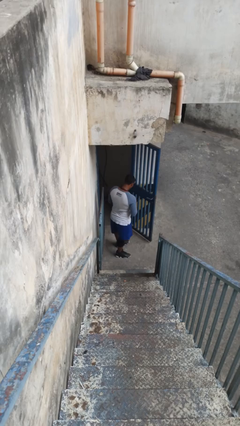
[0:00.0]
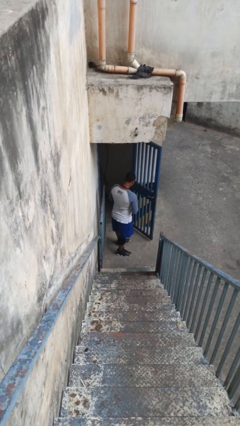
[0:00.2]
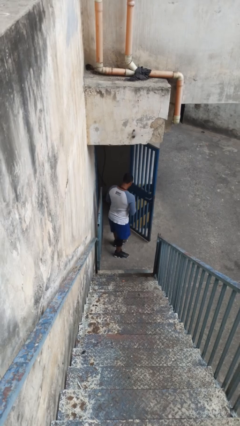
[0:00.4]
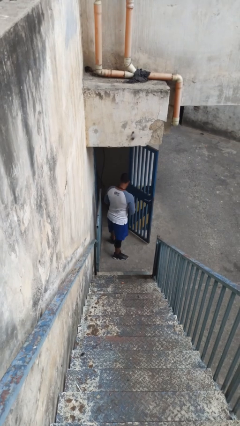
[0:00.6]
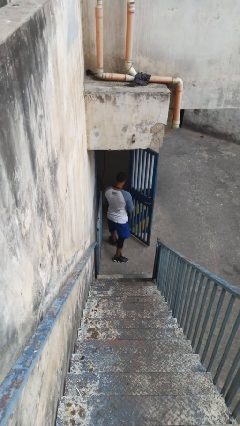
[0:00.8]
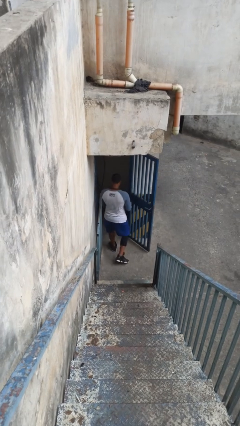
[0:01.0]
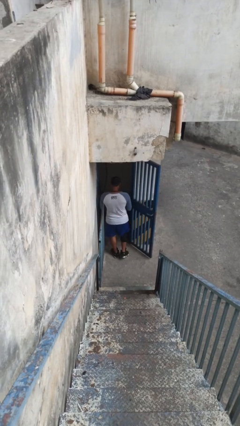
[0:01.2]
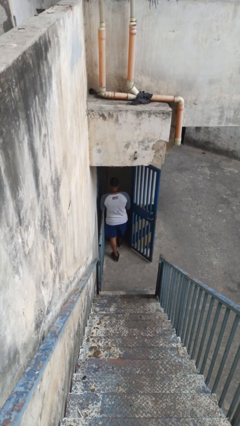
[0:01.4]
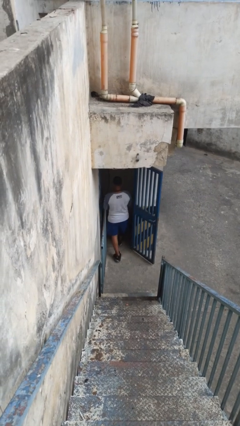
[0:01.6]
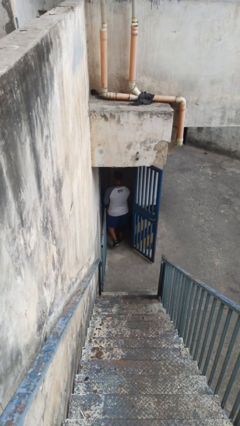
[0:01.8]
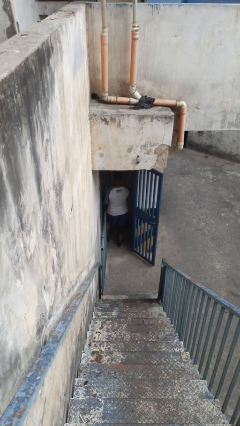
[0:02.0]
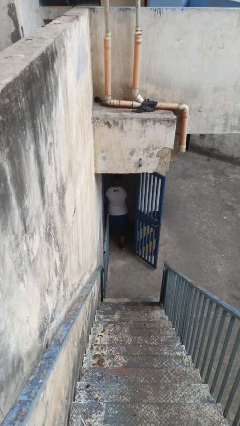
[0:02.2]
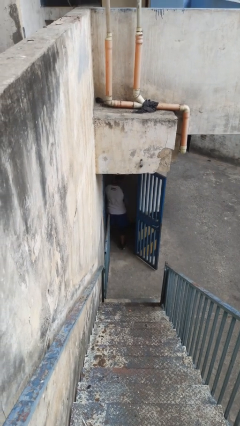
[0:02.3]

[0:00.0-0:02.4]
person exits scene through structure

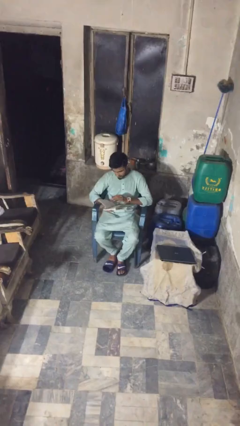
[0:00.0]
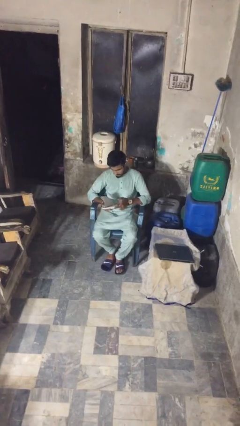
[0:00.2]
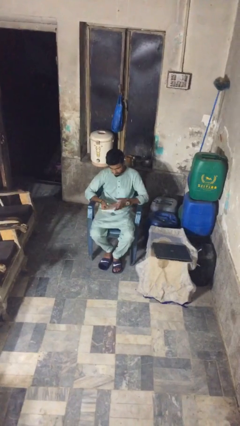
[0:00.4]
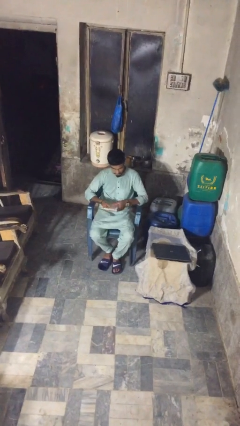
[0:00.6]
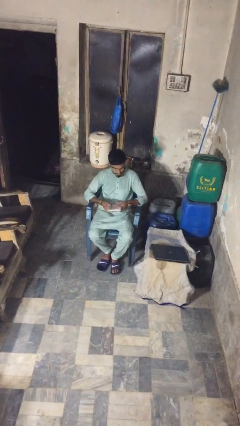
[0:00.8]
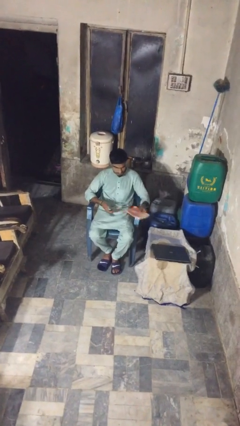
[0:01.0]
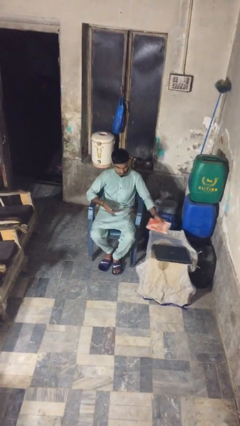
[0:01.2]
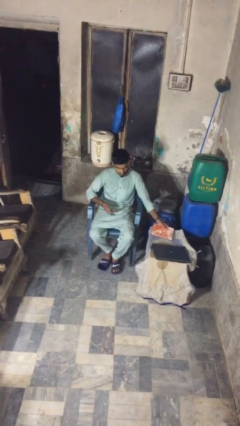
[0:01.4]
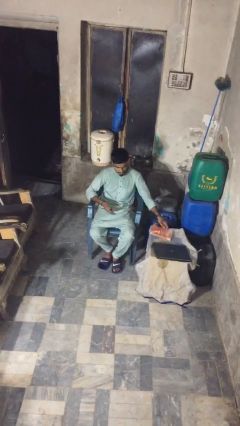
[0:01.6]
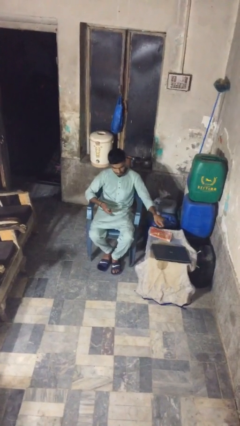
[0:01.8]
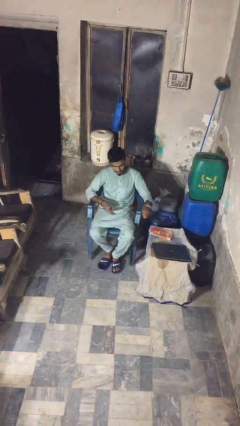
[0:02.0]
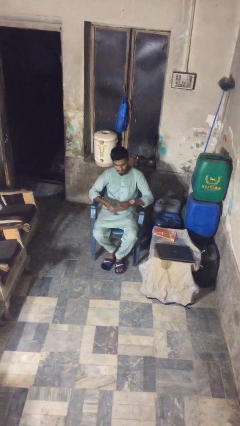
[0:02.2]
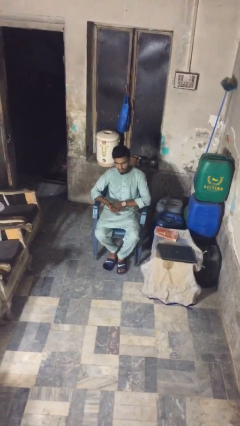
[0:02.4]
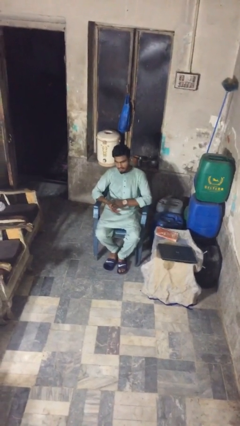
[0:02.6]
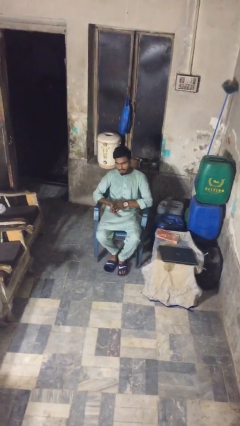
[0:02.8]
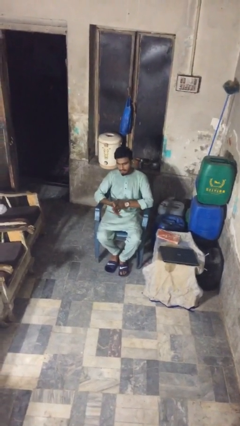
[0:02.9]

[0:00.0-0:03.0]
person puts down object on table

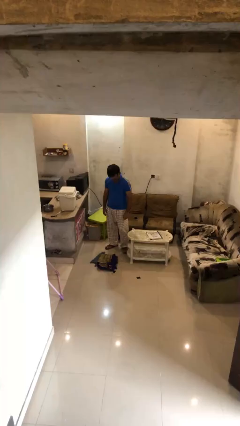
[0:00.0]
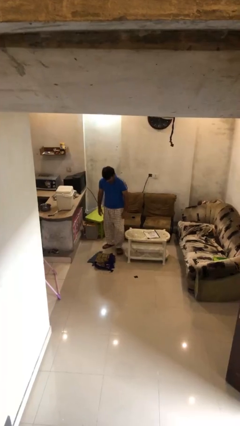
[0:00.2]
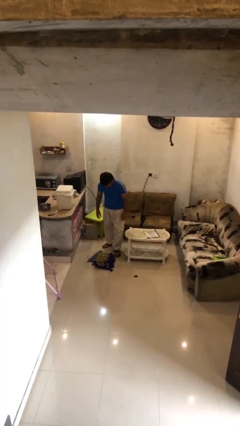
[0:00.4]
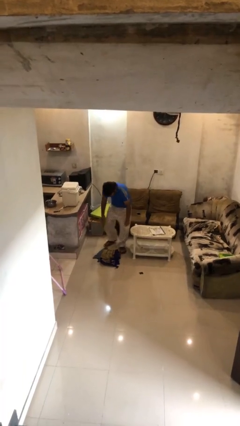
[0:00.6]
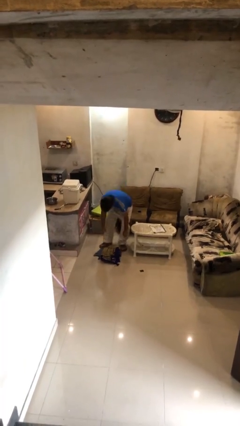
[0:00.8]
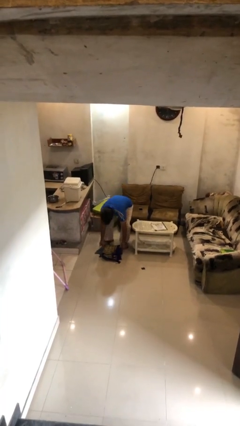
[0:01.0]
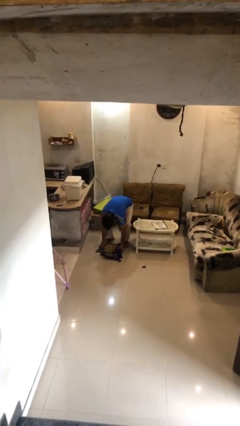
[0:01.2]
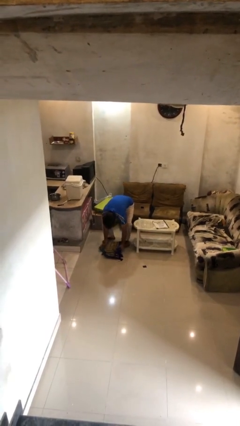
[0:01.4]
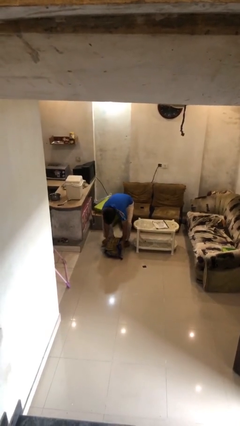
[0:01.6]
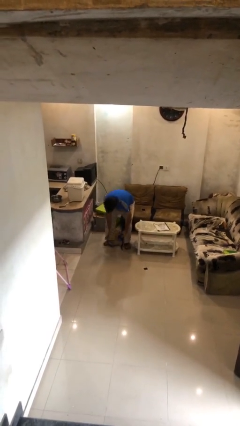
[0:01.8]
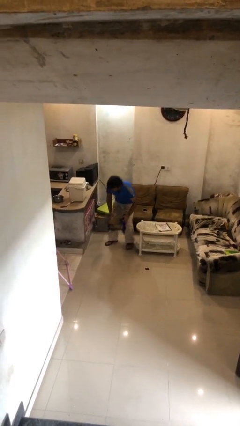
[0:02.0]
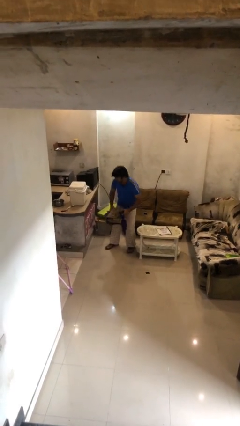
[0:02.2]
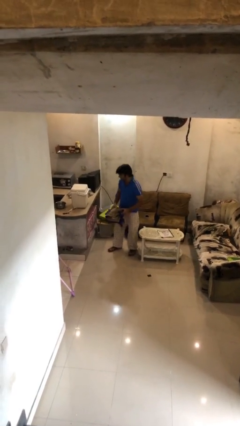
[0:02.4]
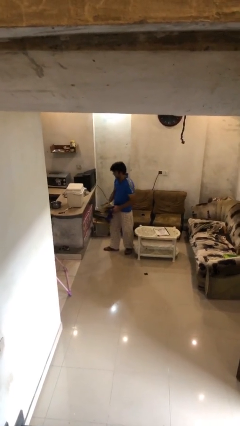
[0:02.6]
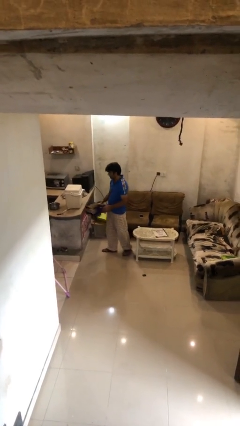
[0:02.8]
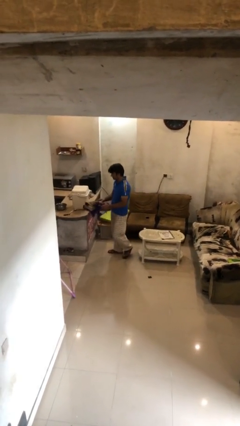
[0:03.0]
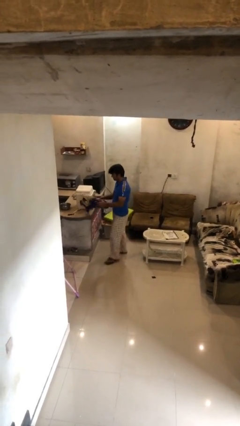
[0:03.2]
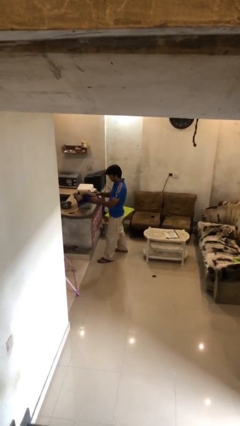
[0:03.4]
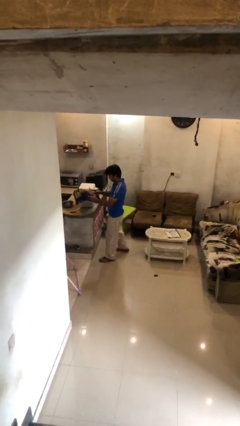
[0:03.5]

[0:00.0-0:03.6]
person picks up object from floor

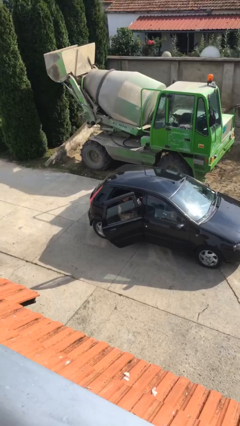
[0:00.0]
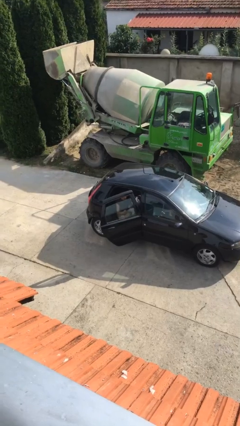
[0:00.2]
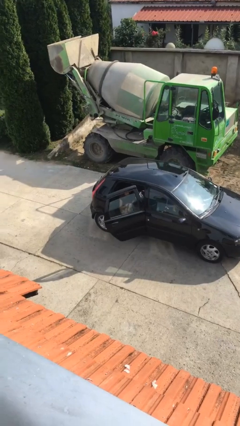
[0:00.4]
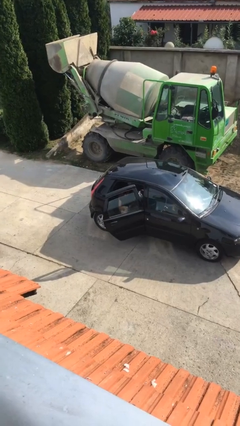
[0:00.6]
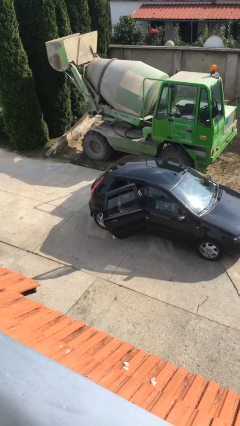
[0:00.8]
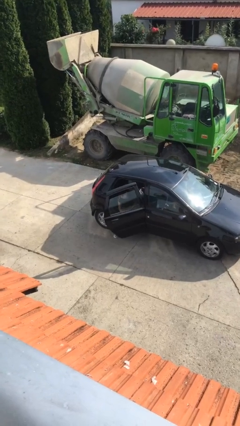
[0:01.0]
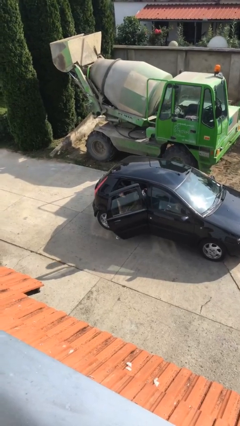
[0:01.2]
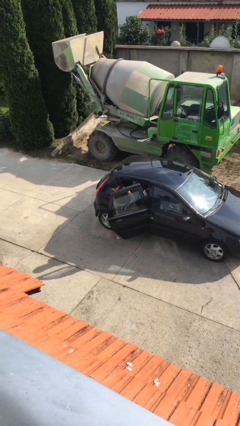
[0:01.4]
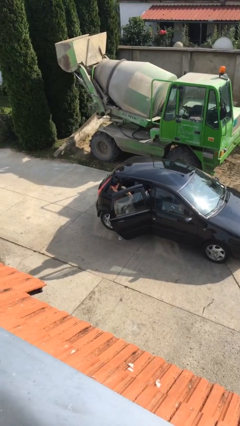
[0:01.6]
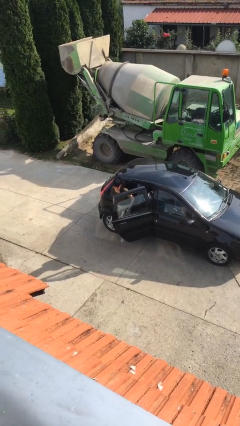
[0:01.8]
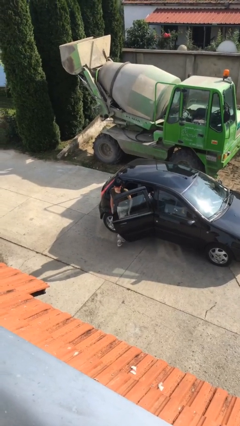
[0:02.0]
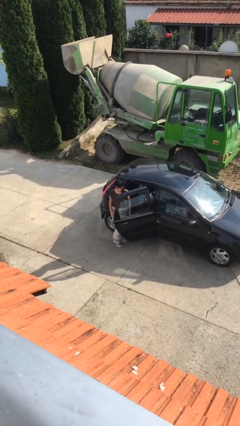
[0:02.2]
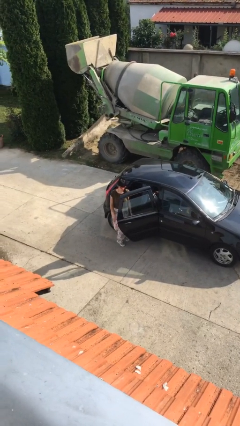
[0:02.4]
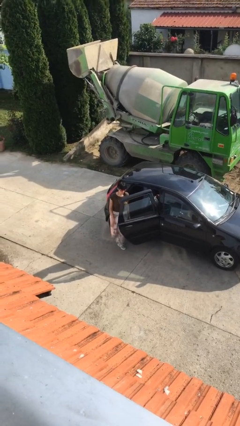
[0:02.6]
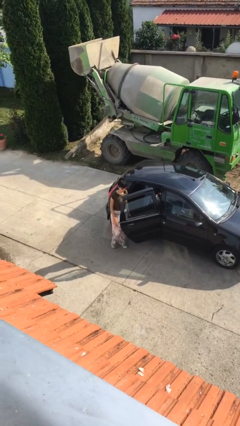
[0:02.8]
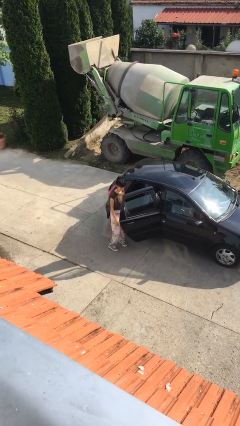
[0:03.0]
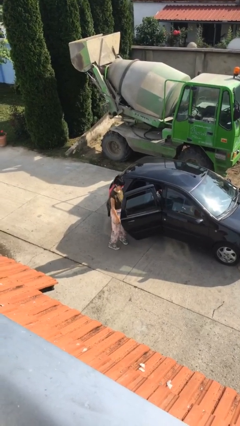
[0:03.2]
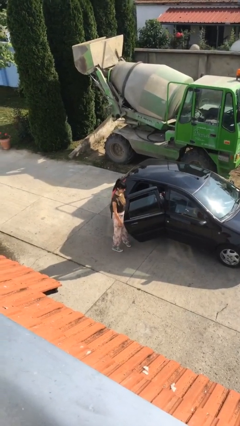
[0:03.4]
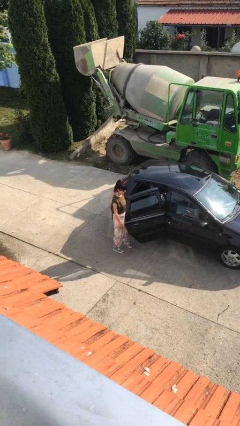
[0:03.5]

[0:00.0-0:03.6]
person exits car

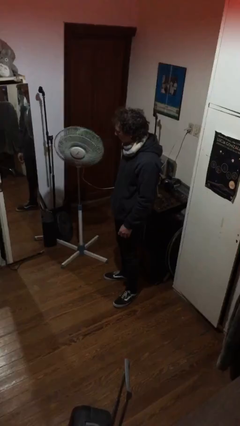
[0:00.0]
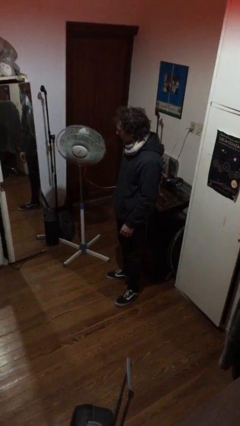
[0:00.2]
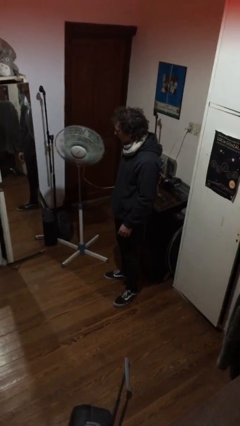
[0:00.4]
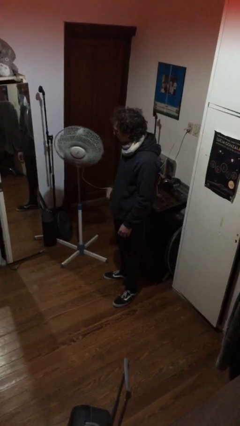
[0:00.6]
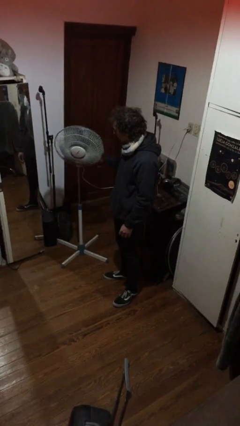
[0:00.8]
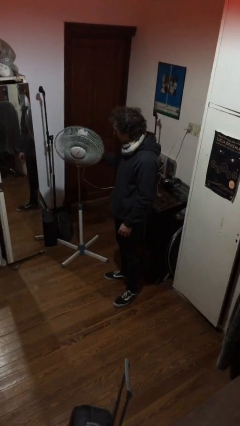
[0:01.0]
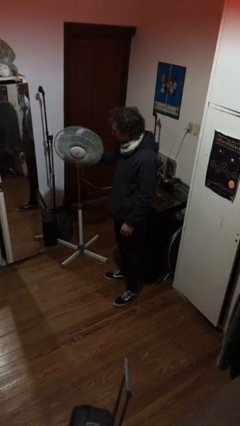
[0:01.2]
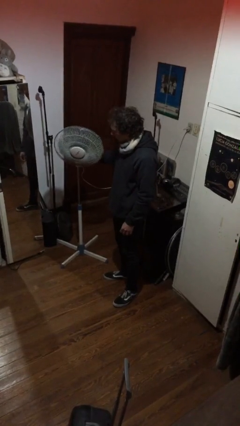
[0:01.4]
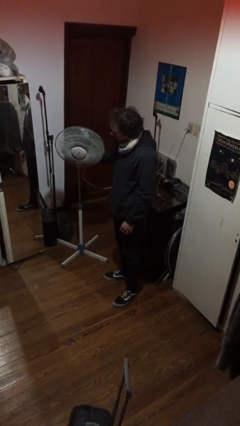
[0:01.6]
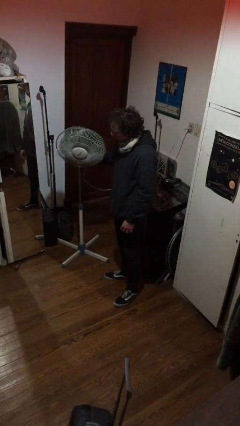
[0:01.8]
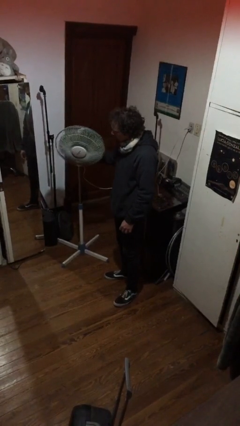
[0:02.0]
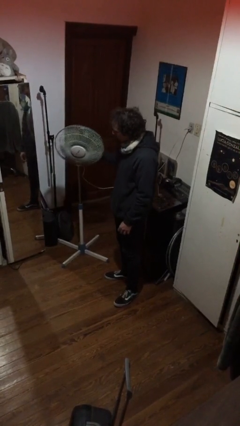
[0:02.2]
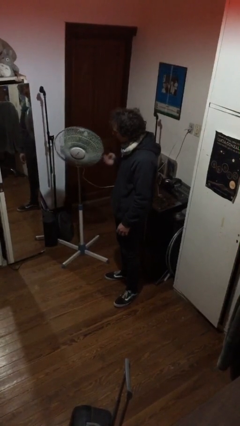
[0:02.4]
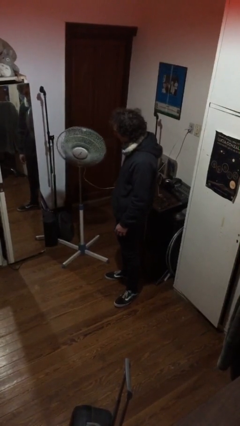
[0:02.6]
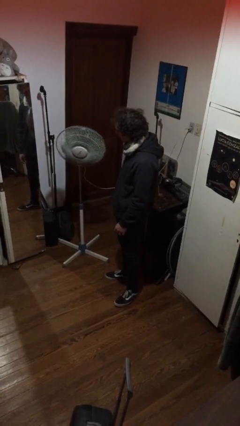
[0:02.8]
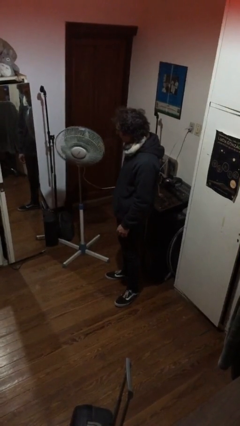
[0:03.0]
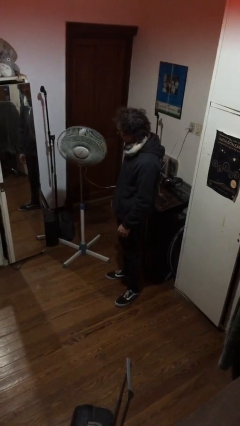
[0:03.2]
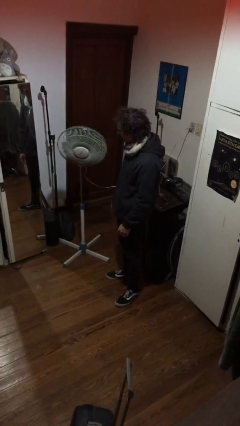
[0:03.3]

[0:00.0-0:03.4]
person turns off fan

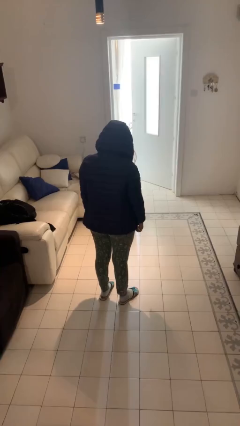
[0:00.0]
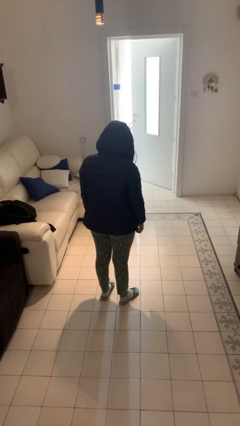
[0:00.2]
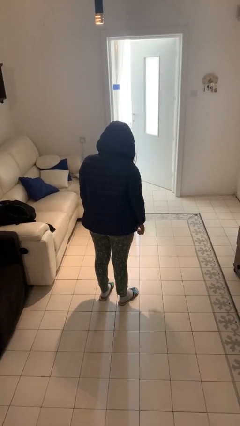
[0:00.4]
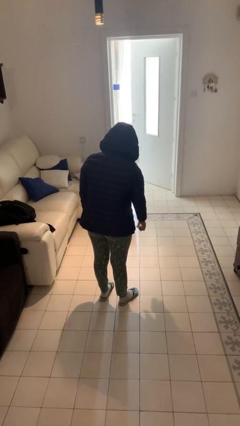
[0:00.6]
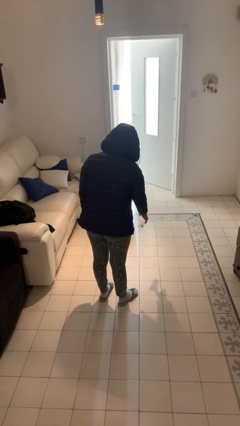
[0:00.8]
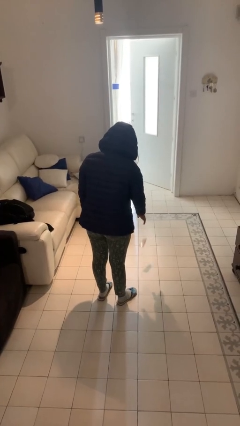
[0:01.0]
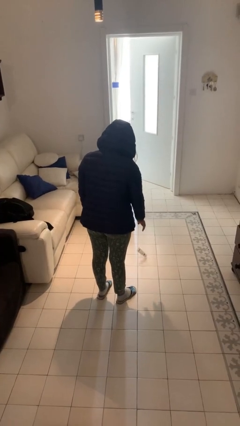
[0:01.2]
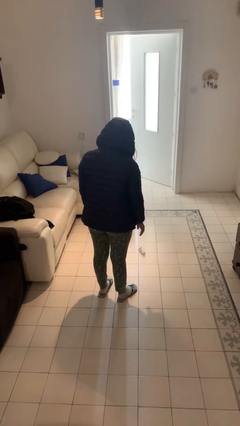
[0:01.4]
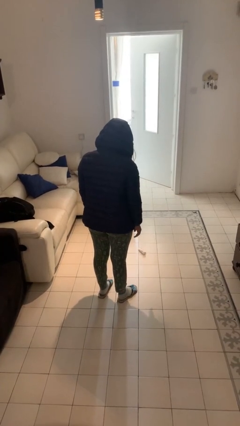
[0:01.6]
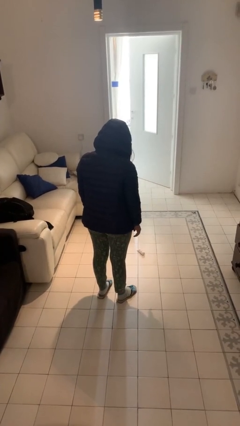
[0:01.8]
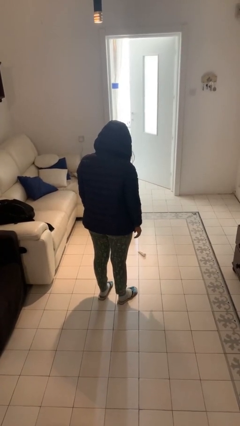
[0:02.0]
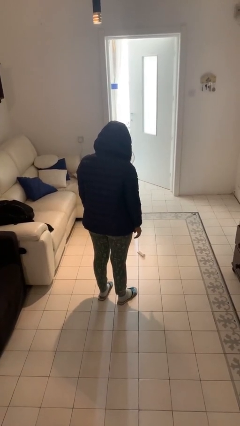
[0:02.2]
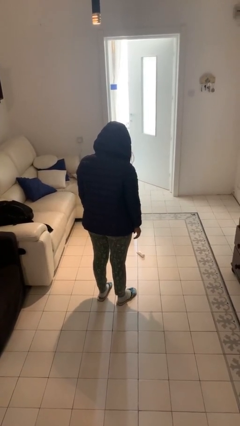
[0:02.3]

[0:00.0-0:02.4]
person throws object to ground
